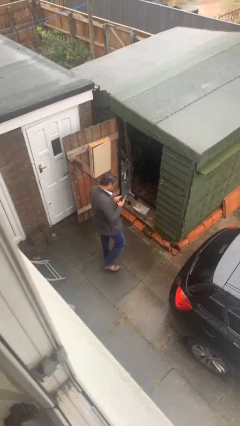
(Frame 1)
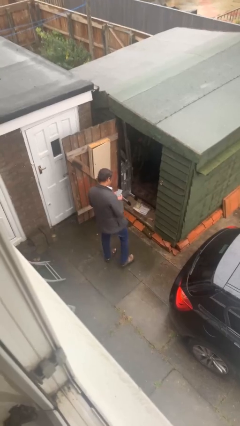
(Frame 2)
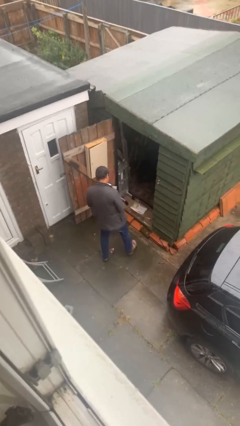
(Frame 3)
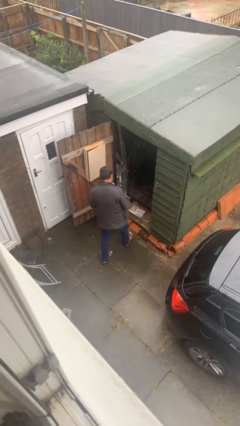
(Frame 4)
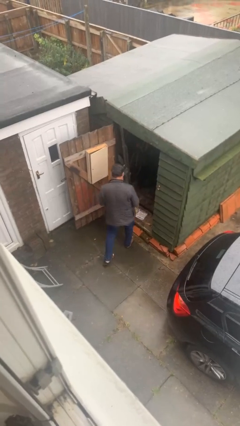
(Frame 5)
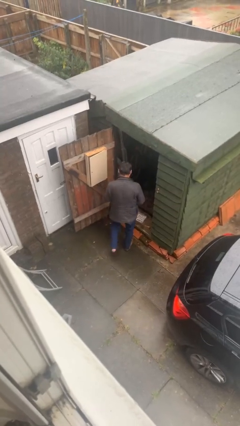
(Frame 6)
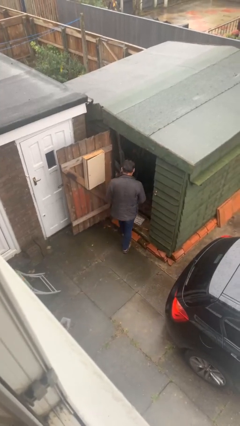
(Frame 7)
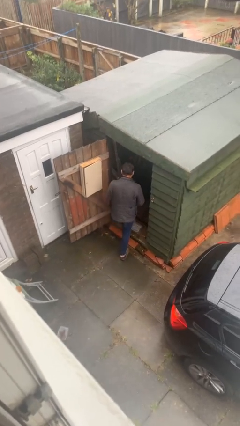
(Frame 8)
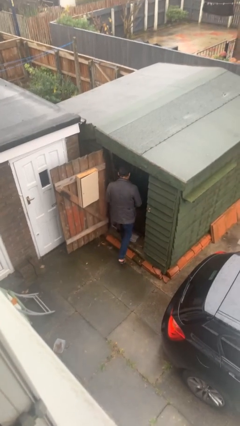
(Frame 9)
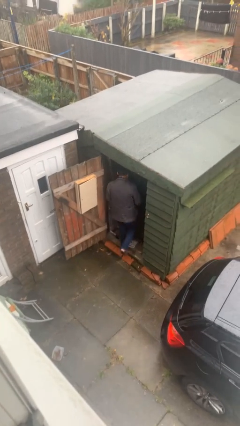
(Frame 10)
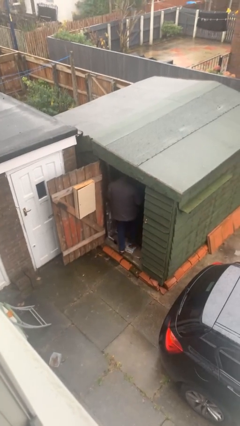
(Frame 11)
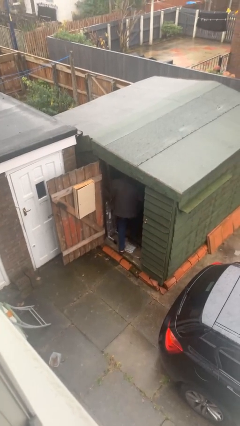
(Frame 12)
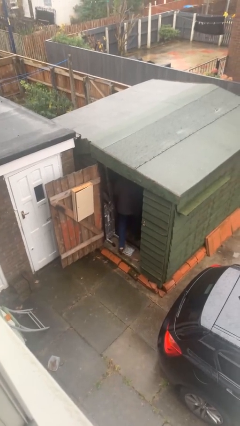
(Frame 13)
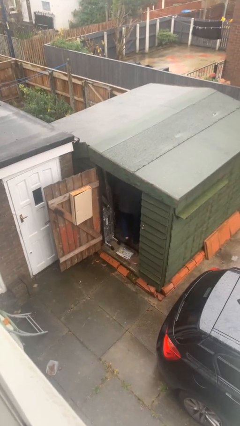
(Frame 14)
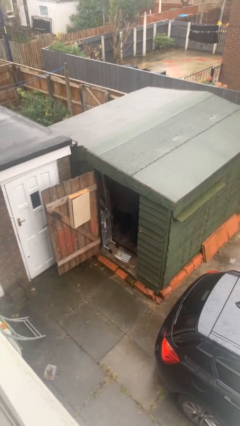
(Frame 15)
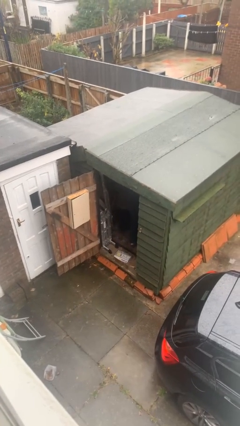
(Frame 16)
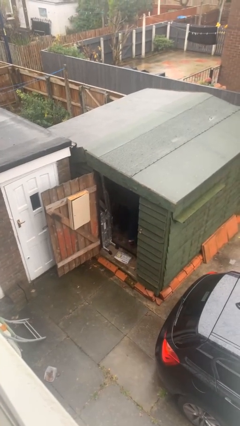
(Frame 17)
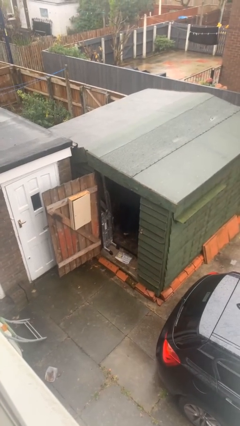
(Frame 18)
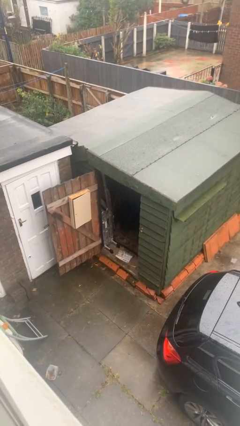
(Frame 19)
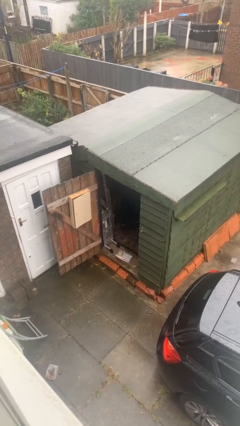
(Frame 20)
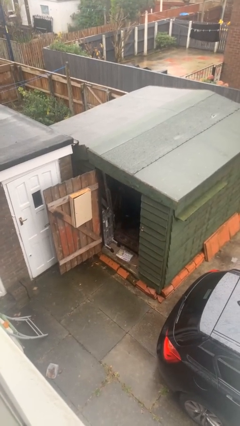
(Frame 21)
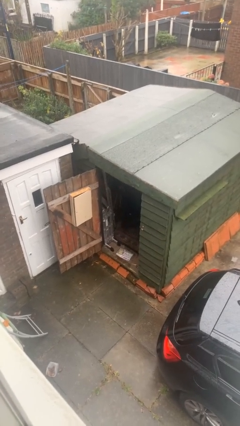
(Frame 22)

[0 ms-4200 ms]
person exits scene through structure

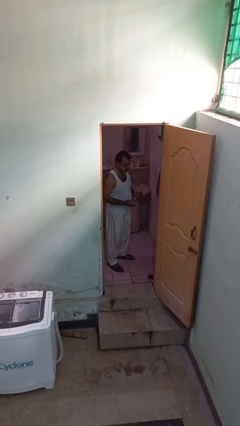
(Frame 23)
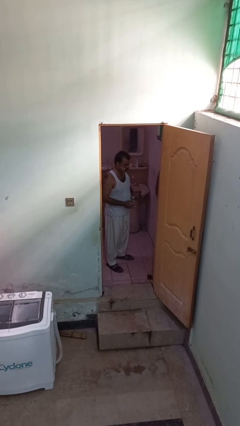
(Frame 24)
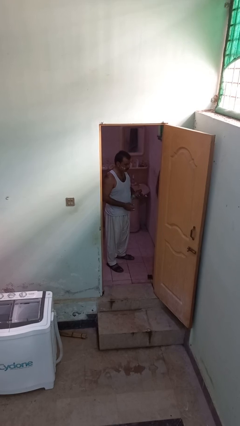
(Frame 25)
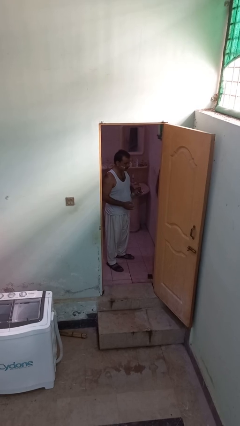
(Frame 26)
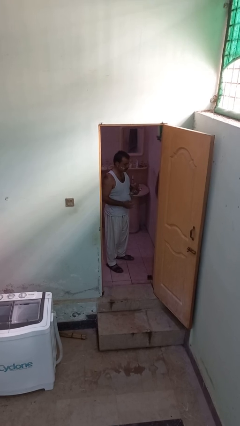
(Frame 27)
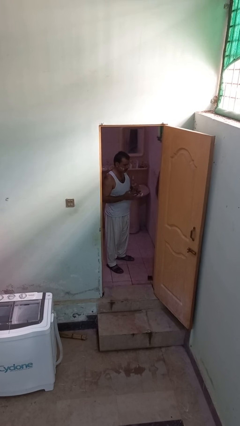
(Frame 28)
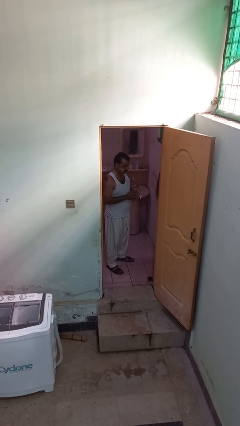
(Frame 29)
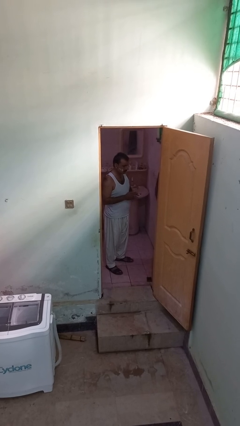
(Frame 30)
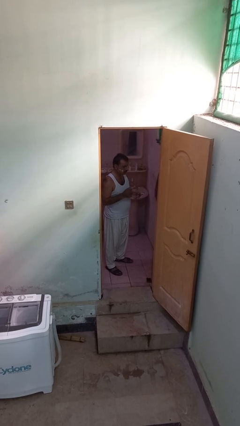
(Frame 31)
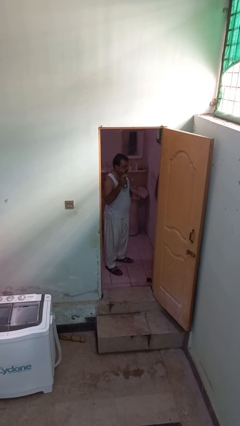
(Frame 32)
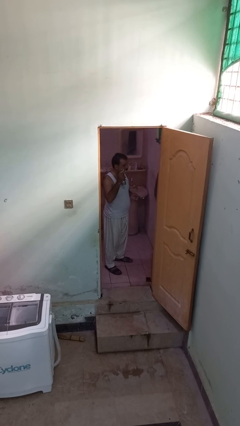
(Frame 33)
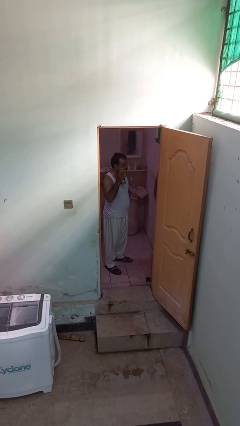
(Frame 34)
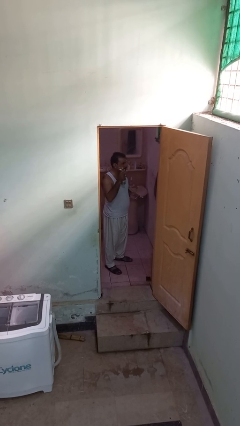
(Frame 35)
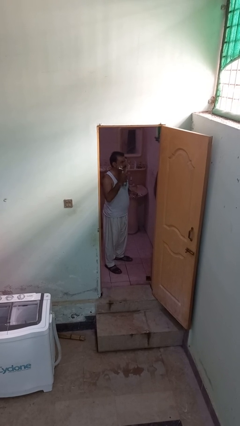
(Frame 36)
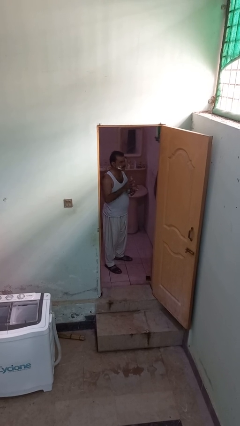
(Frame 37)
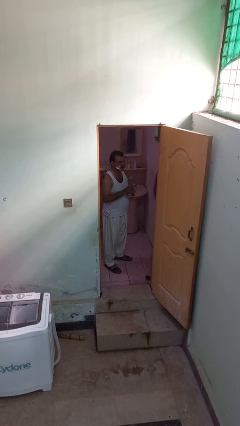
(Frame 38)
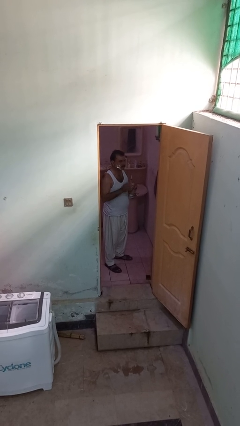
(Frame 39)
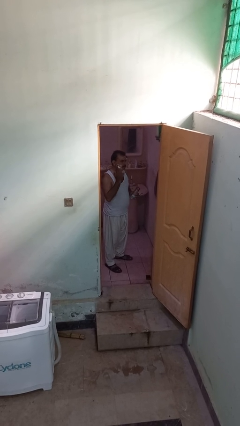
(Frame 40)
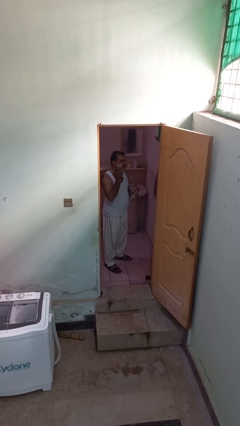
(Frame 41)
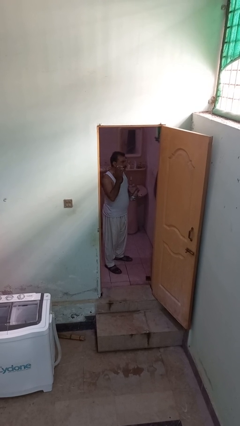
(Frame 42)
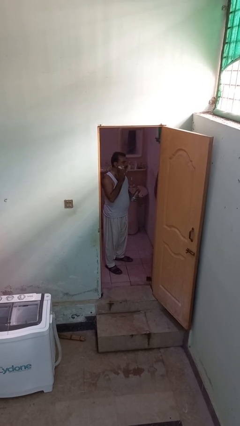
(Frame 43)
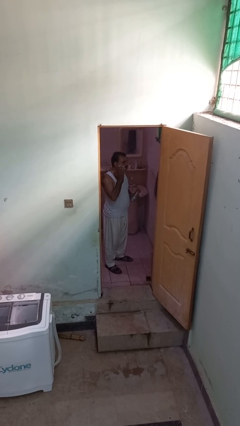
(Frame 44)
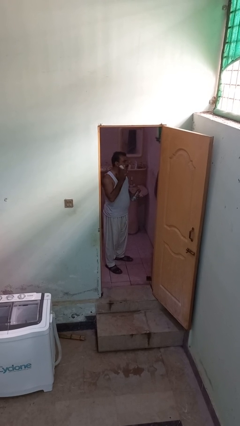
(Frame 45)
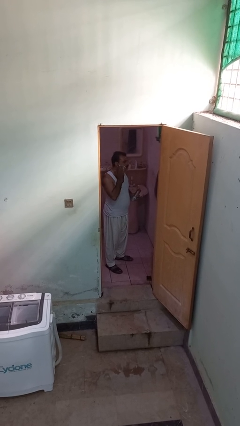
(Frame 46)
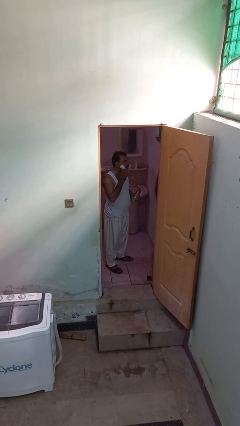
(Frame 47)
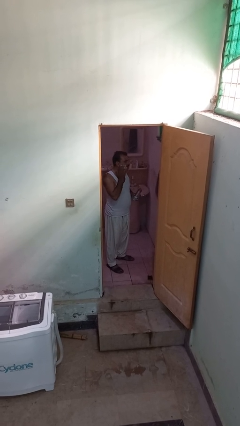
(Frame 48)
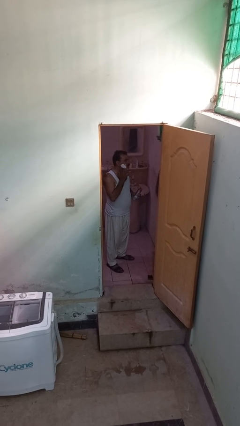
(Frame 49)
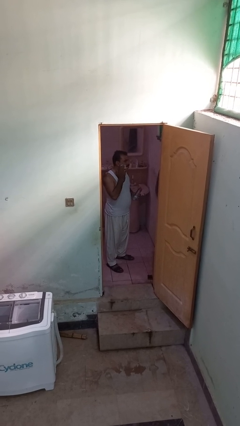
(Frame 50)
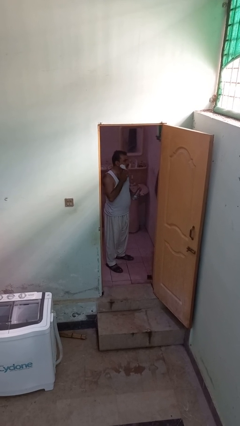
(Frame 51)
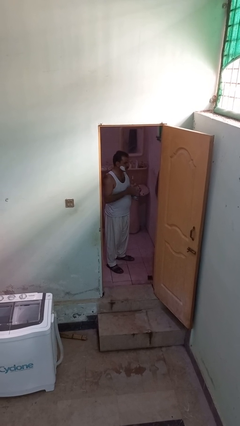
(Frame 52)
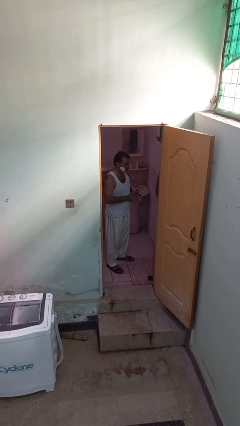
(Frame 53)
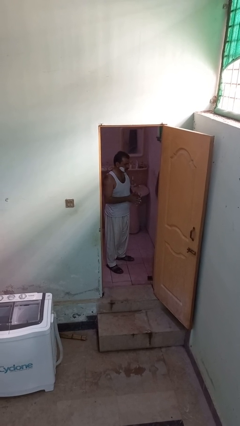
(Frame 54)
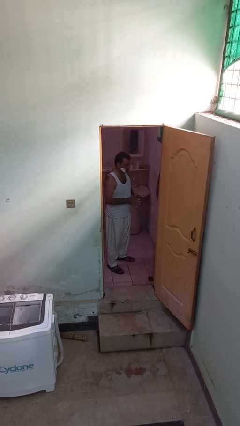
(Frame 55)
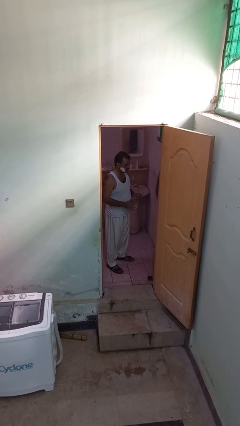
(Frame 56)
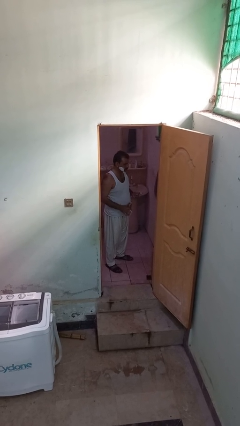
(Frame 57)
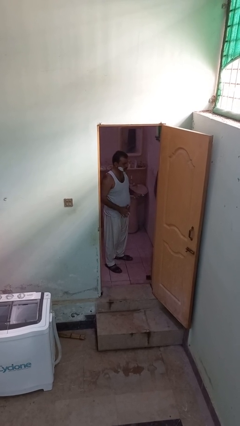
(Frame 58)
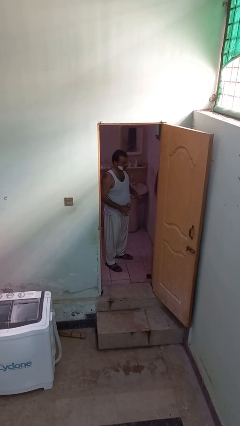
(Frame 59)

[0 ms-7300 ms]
person applies shaving cream

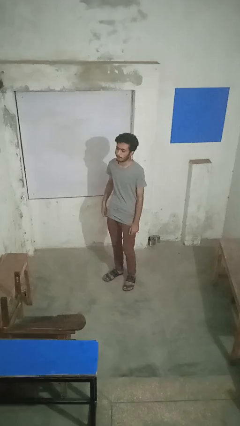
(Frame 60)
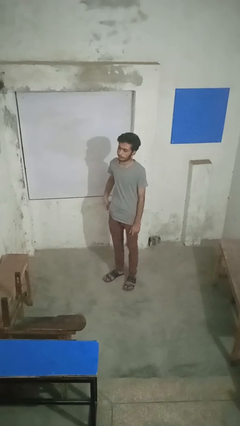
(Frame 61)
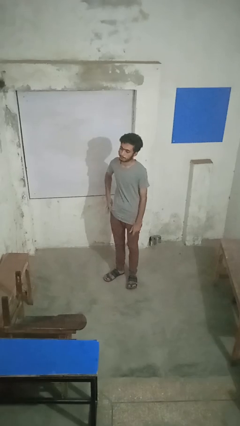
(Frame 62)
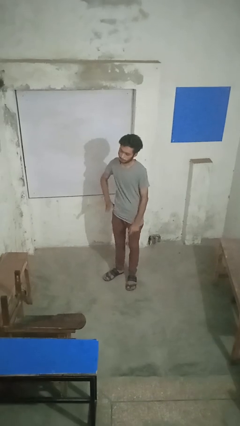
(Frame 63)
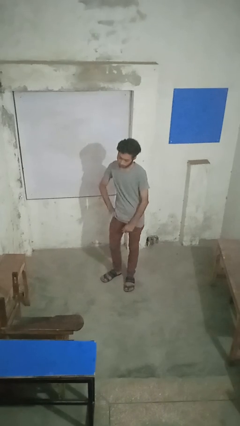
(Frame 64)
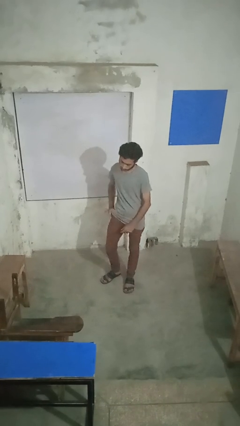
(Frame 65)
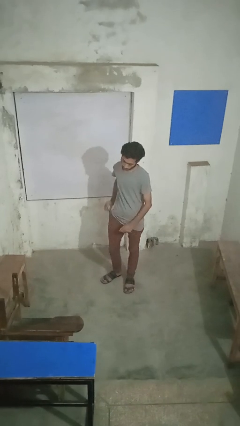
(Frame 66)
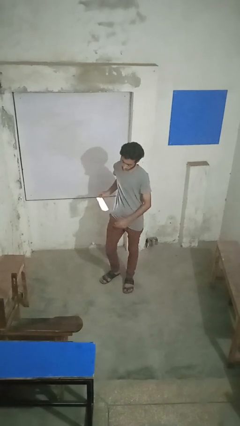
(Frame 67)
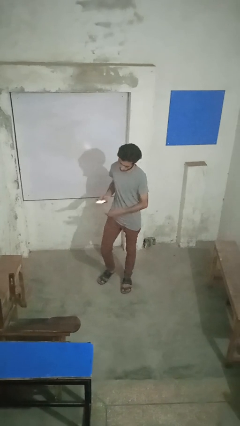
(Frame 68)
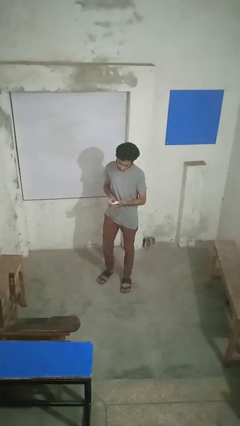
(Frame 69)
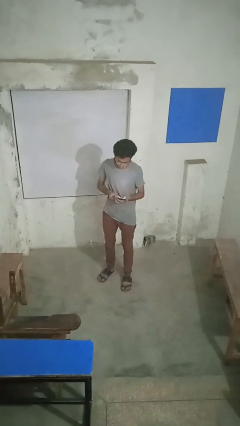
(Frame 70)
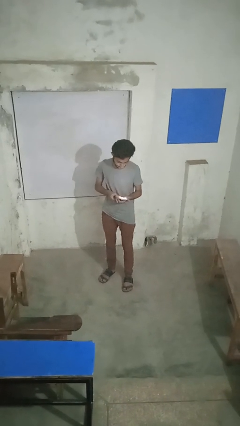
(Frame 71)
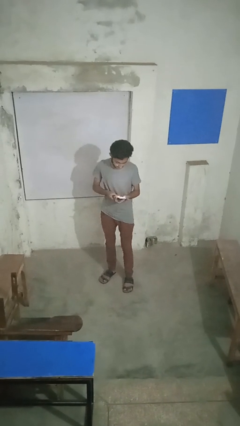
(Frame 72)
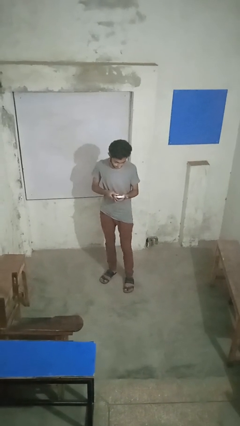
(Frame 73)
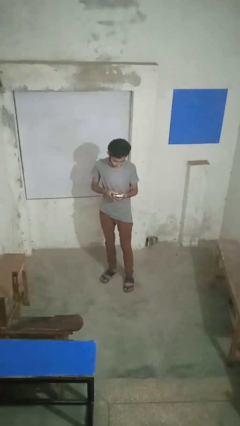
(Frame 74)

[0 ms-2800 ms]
person takes phone from pocket

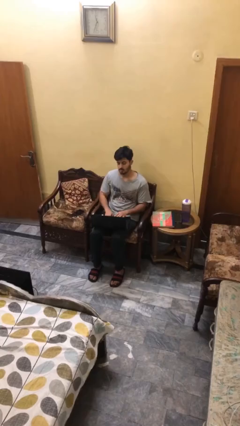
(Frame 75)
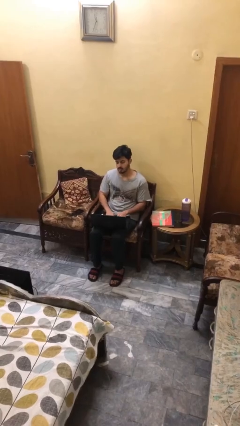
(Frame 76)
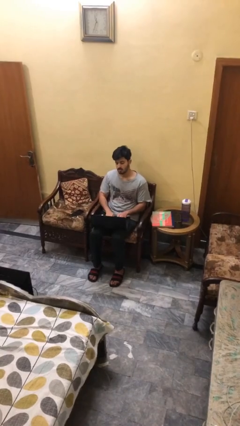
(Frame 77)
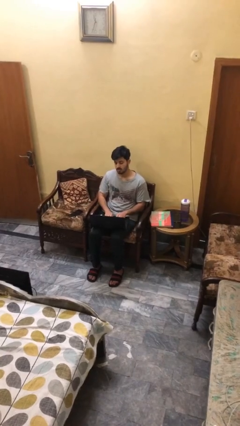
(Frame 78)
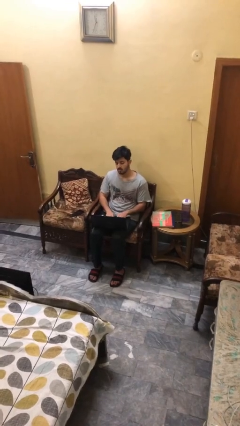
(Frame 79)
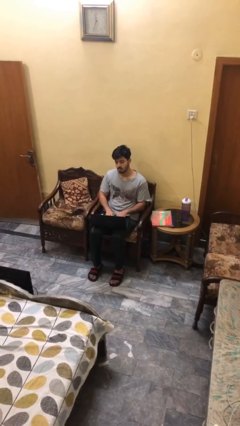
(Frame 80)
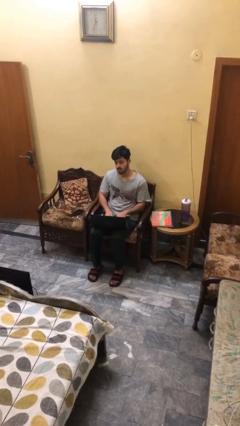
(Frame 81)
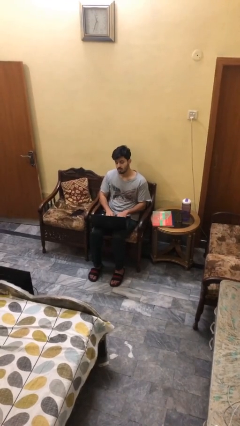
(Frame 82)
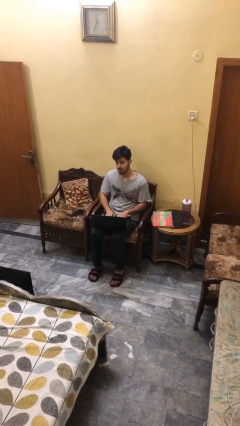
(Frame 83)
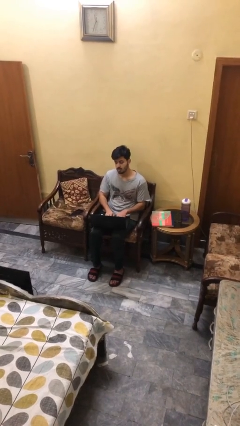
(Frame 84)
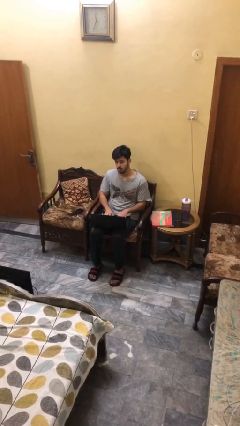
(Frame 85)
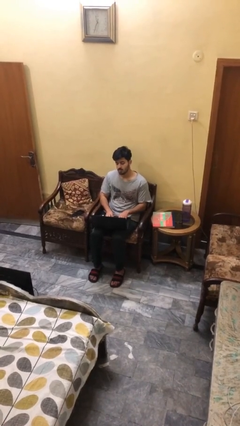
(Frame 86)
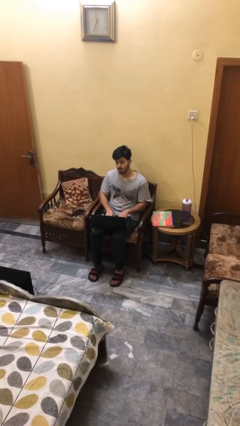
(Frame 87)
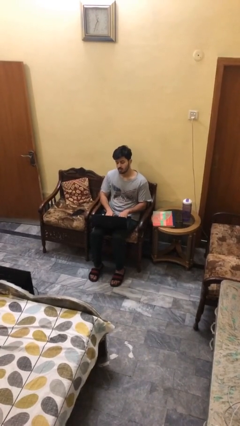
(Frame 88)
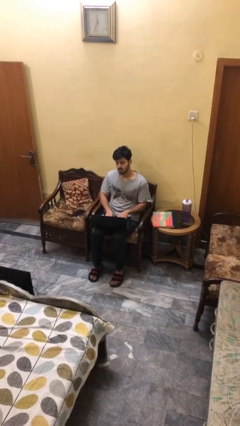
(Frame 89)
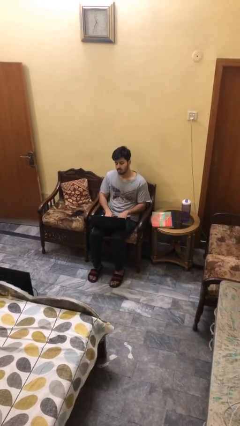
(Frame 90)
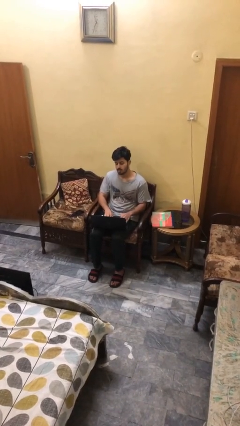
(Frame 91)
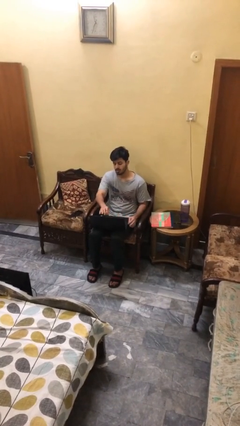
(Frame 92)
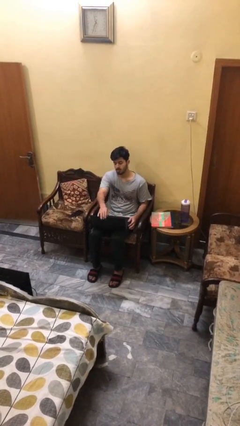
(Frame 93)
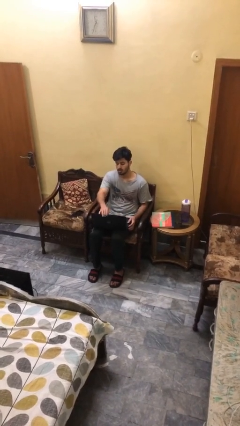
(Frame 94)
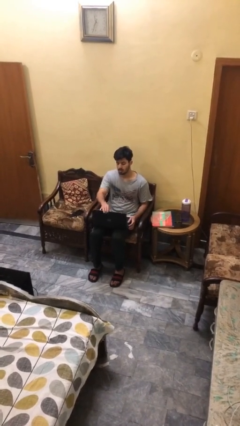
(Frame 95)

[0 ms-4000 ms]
person interacts with laptop
